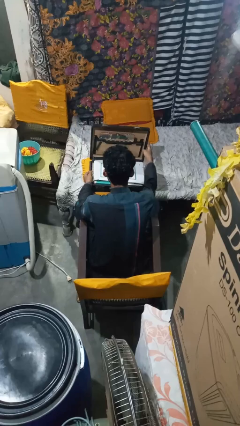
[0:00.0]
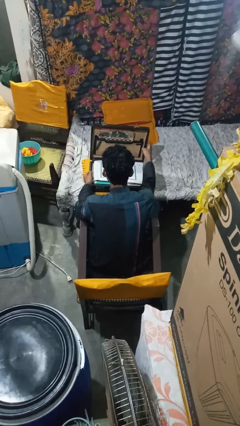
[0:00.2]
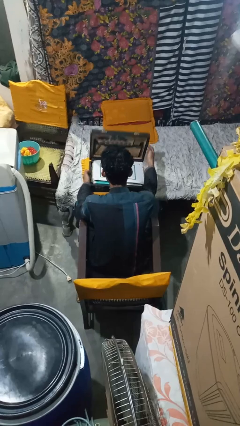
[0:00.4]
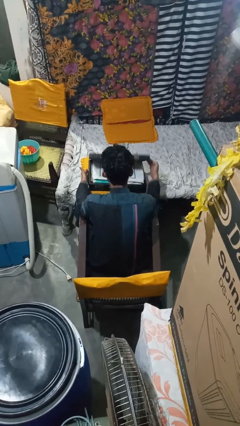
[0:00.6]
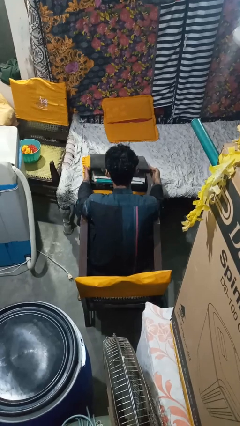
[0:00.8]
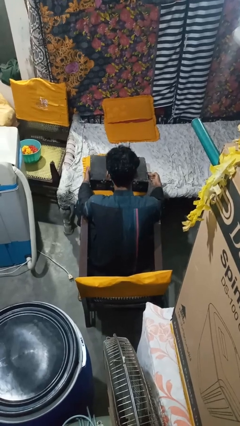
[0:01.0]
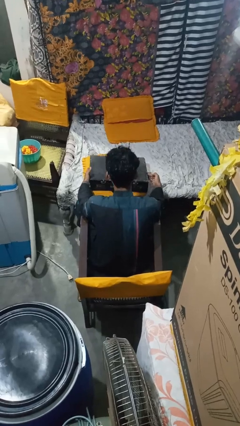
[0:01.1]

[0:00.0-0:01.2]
person closes suitcase

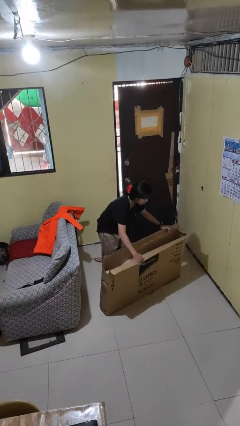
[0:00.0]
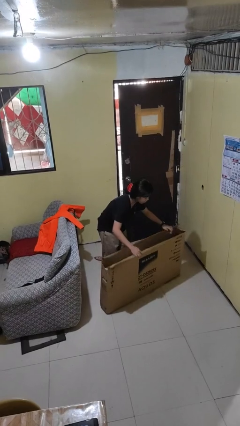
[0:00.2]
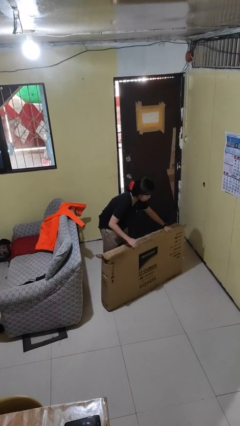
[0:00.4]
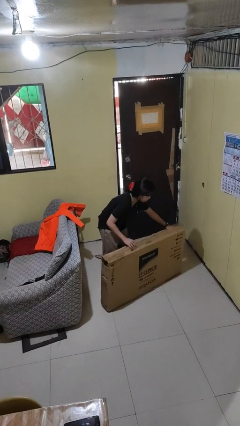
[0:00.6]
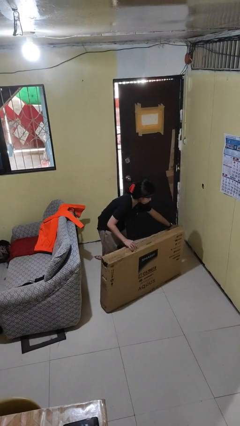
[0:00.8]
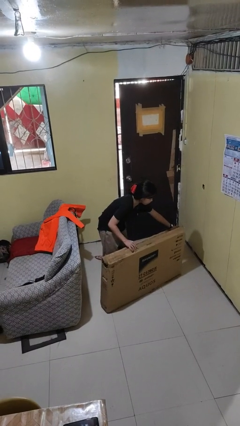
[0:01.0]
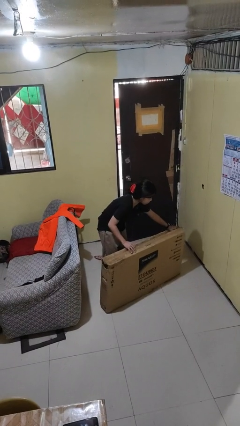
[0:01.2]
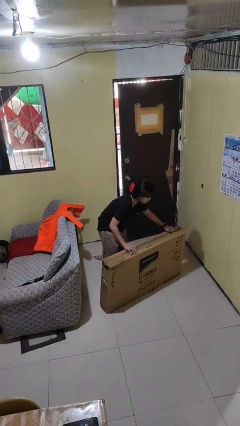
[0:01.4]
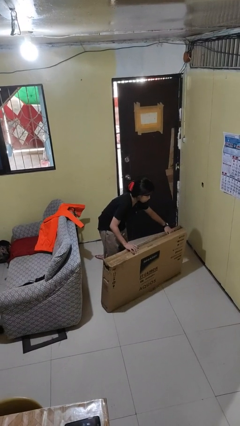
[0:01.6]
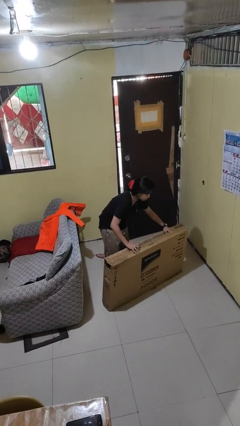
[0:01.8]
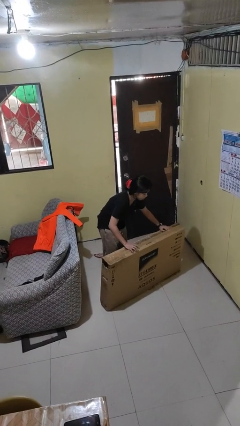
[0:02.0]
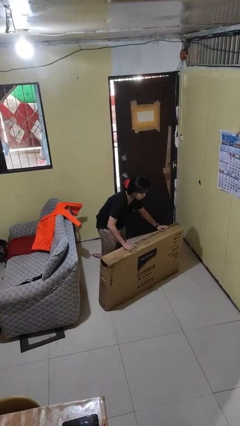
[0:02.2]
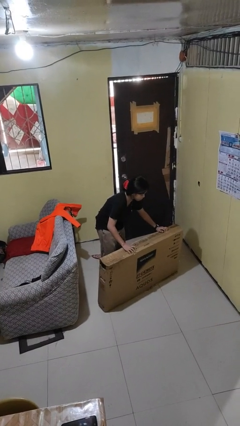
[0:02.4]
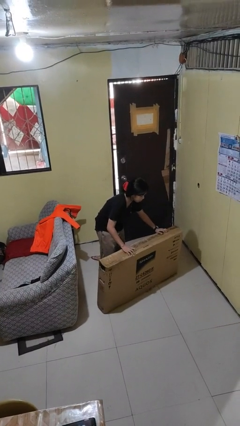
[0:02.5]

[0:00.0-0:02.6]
person closes box

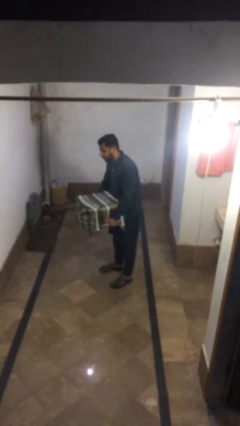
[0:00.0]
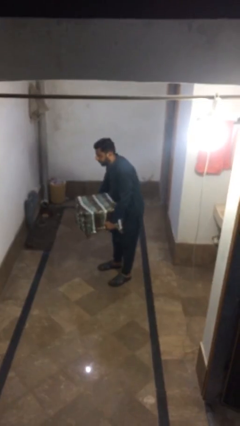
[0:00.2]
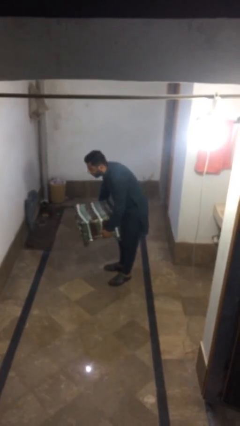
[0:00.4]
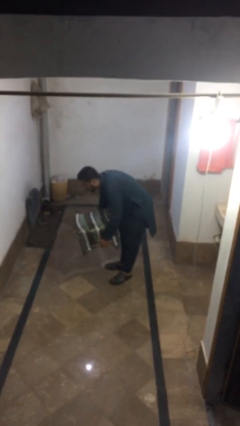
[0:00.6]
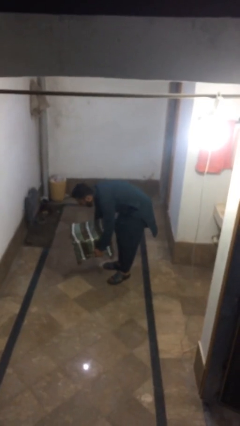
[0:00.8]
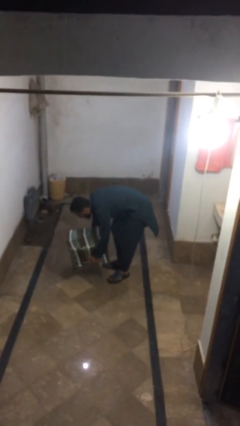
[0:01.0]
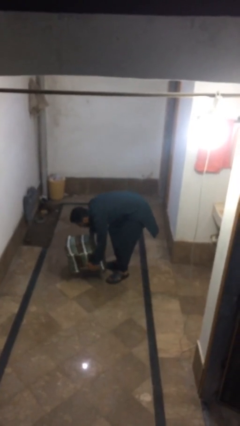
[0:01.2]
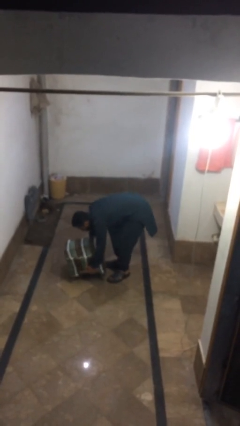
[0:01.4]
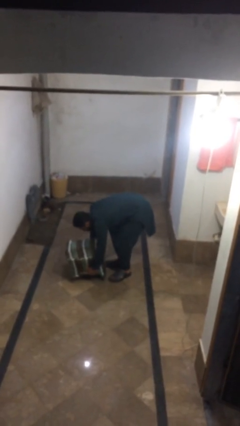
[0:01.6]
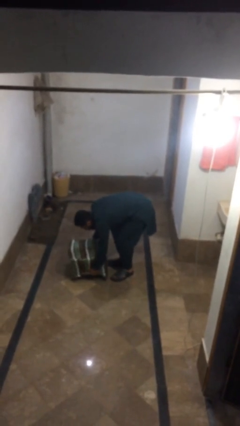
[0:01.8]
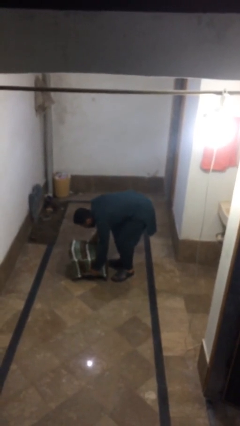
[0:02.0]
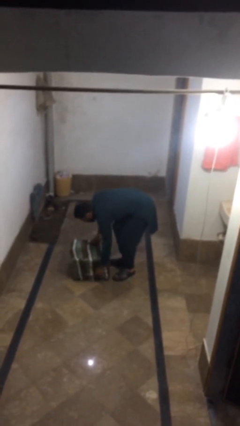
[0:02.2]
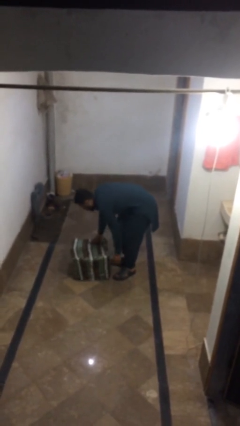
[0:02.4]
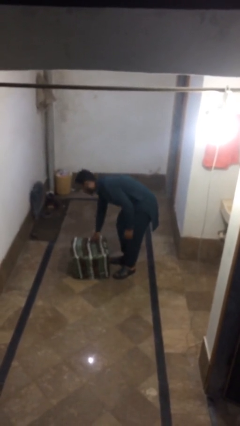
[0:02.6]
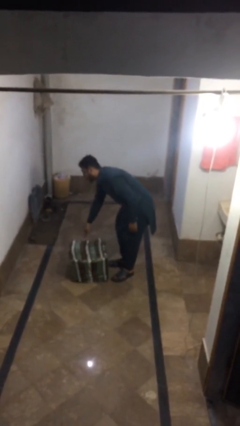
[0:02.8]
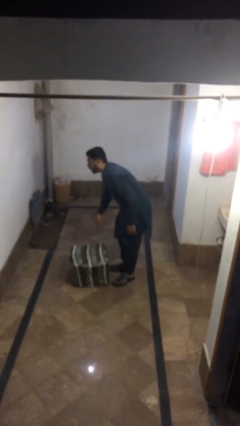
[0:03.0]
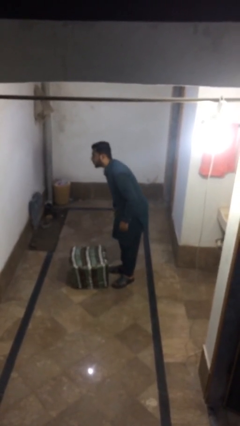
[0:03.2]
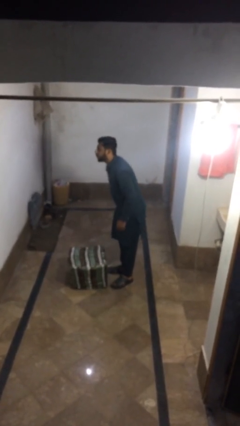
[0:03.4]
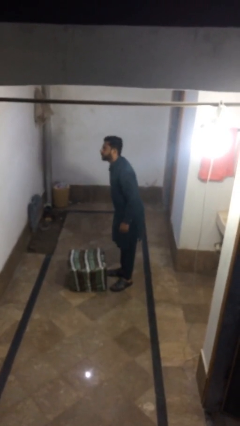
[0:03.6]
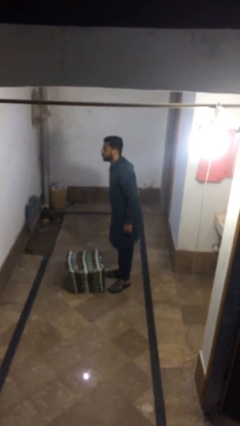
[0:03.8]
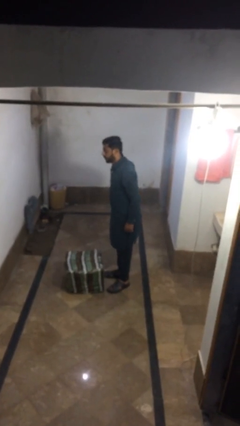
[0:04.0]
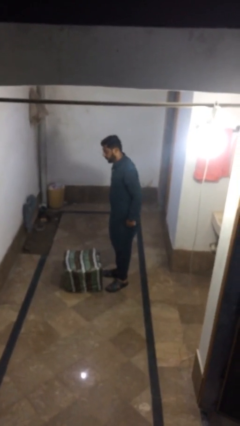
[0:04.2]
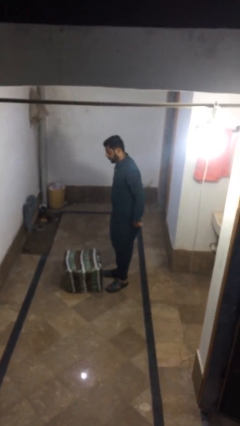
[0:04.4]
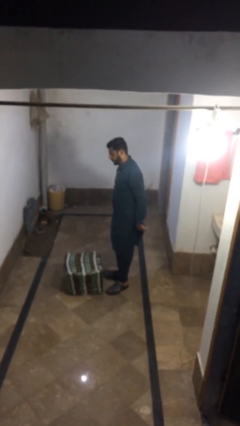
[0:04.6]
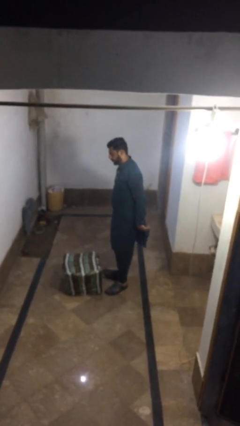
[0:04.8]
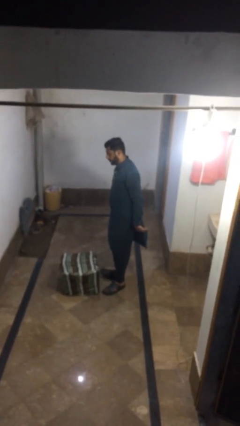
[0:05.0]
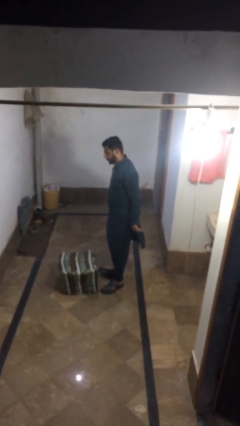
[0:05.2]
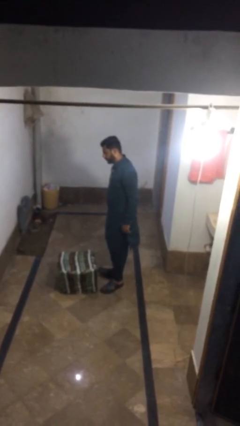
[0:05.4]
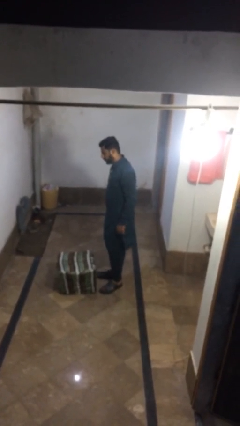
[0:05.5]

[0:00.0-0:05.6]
person puts down object on floor

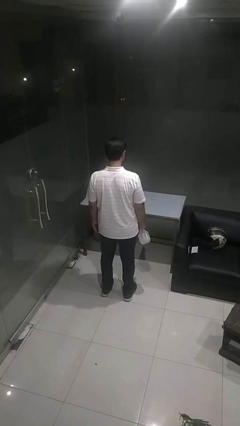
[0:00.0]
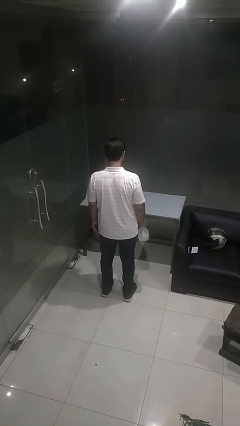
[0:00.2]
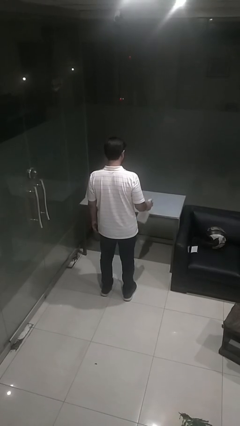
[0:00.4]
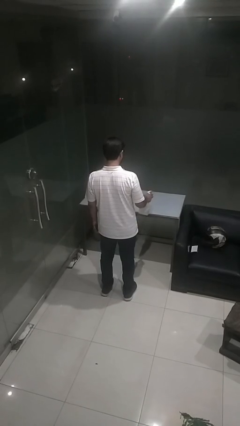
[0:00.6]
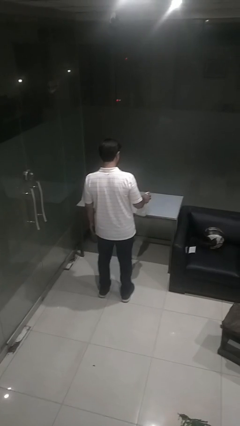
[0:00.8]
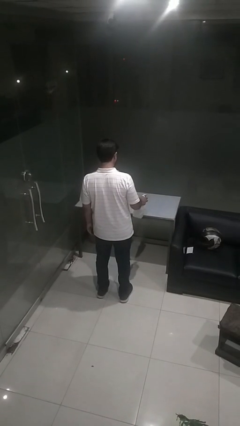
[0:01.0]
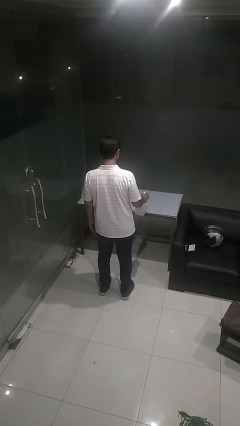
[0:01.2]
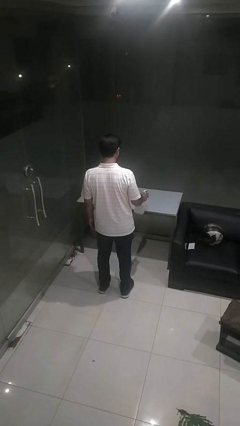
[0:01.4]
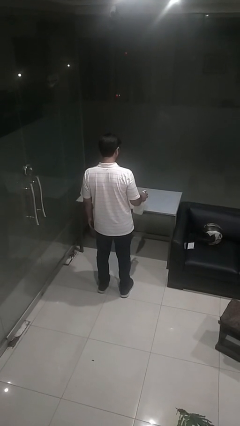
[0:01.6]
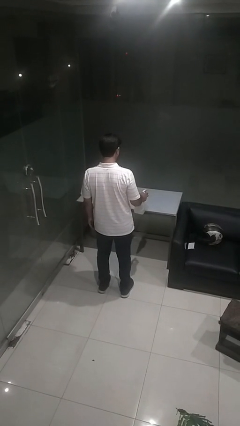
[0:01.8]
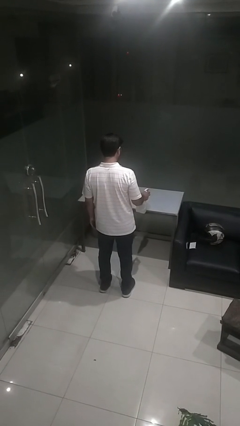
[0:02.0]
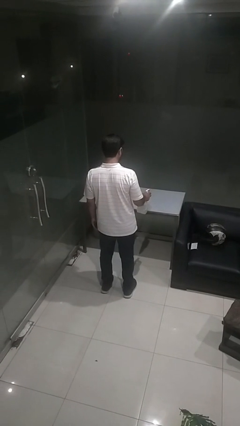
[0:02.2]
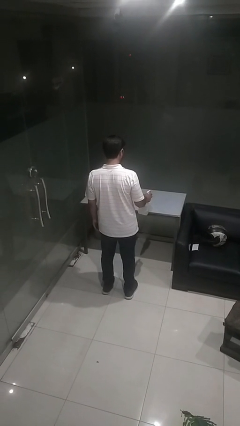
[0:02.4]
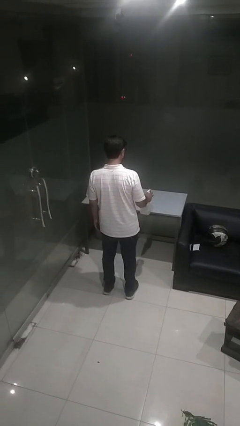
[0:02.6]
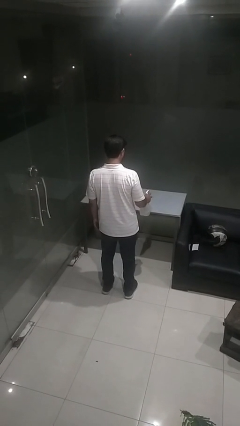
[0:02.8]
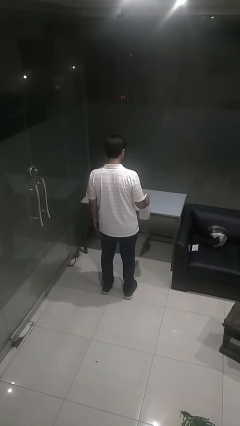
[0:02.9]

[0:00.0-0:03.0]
person sprays from bottle

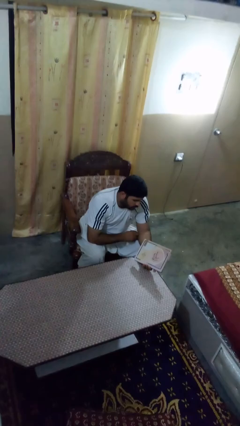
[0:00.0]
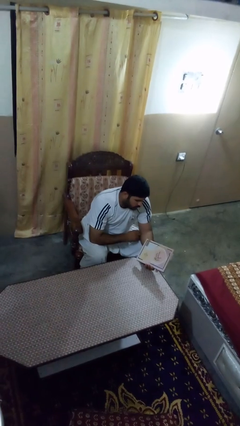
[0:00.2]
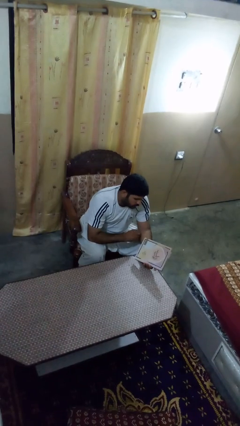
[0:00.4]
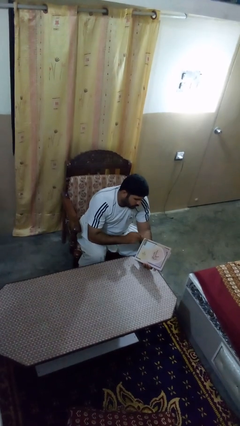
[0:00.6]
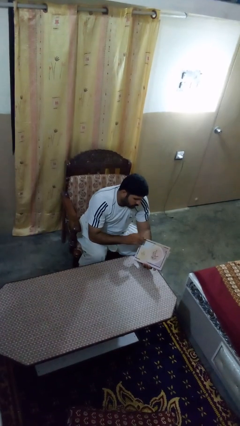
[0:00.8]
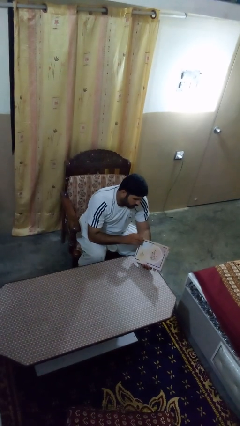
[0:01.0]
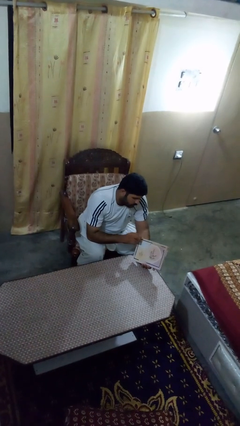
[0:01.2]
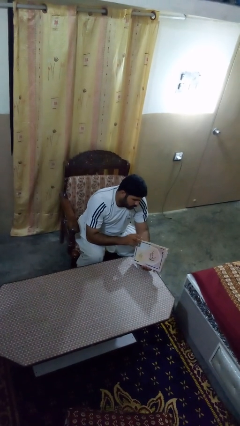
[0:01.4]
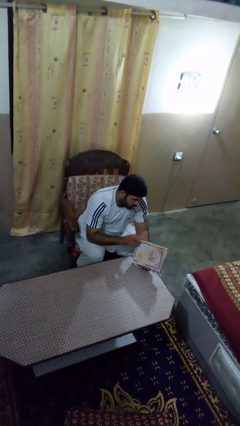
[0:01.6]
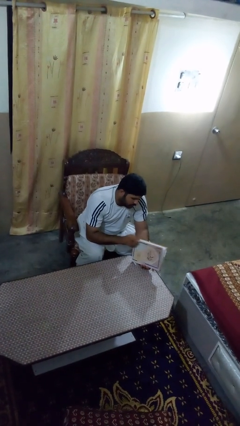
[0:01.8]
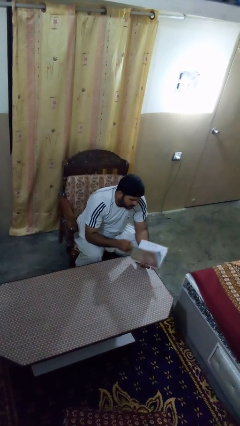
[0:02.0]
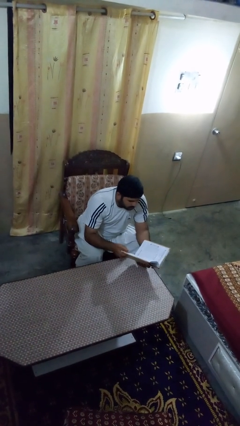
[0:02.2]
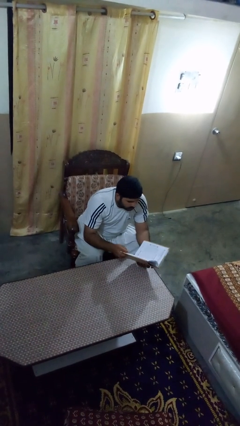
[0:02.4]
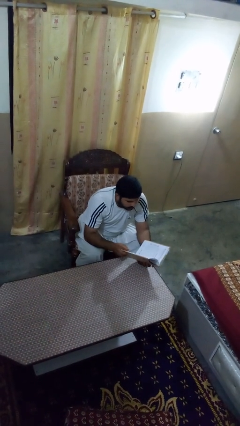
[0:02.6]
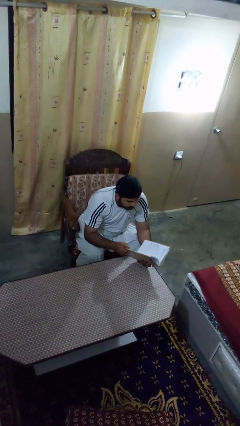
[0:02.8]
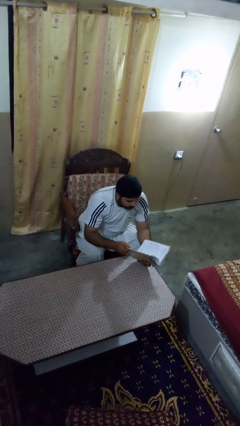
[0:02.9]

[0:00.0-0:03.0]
person reads book

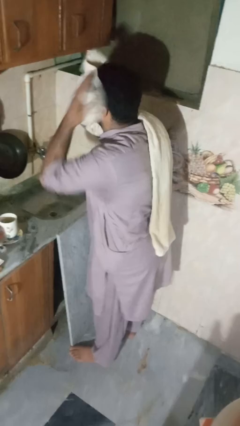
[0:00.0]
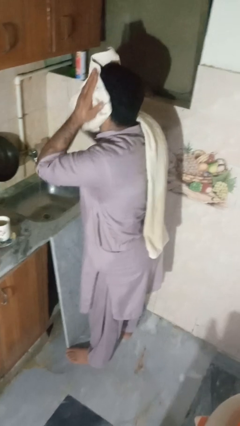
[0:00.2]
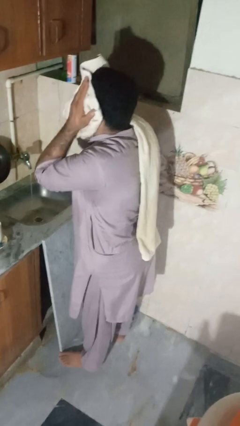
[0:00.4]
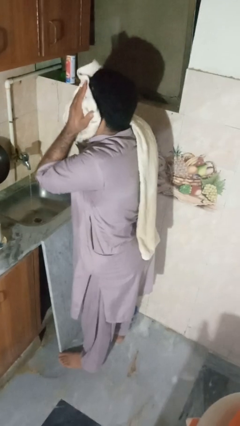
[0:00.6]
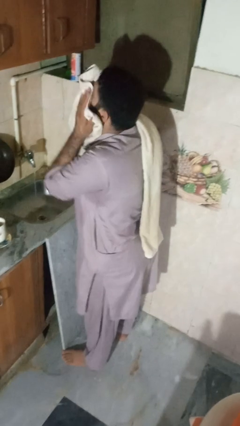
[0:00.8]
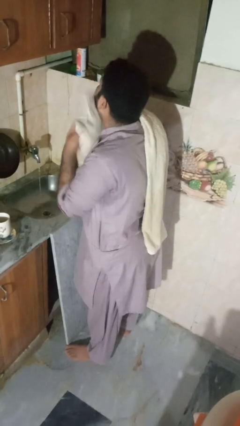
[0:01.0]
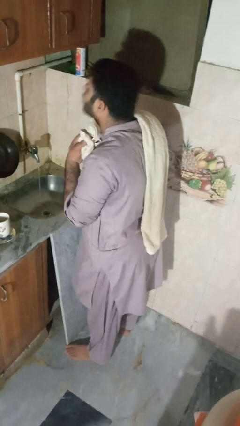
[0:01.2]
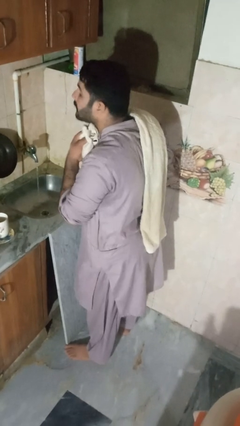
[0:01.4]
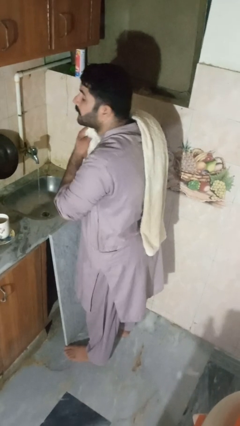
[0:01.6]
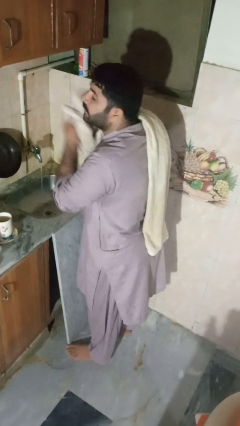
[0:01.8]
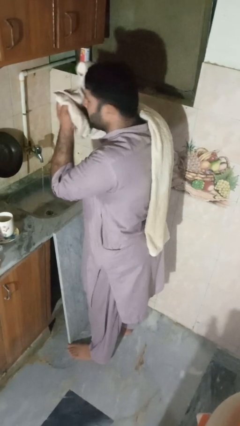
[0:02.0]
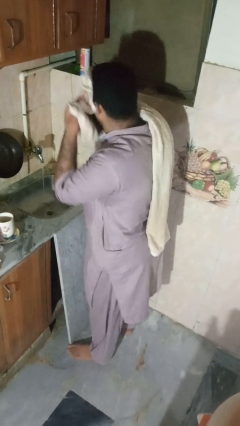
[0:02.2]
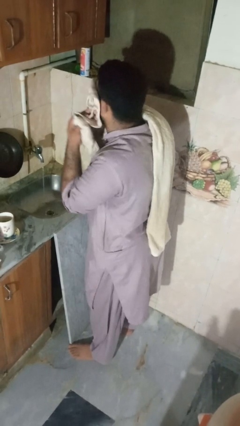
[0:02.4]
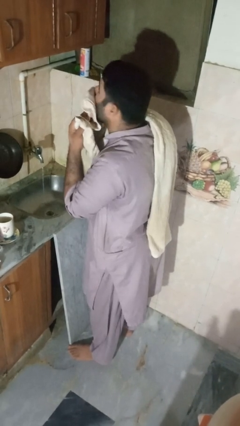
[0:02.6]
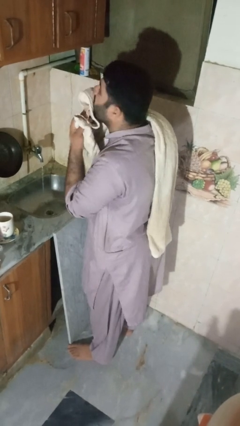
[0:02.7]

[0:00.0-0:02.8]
person dries face with towel
